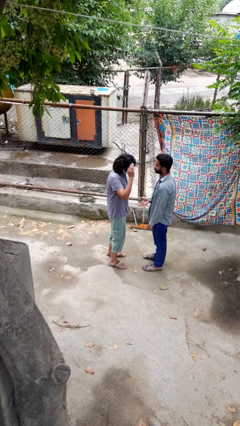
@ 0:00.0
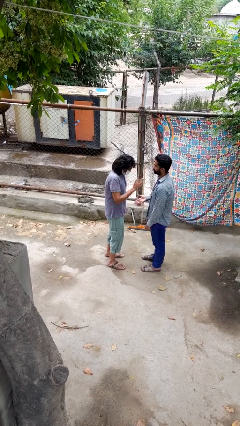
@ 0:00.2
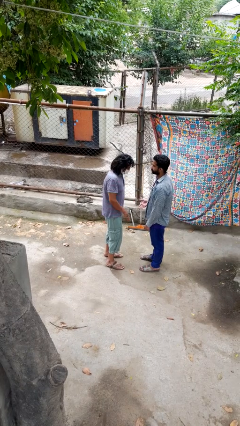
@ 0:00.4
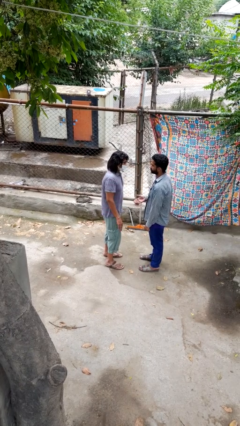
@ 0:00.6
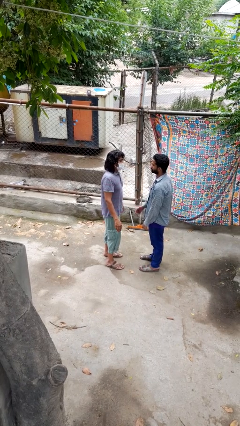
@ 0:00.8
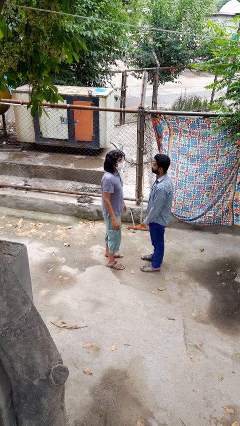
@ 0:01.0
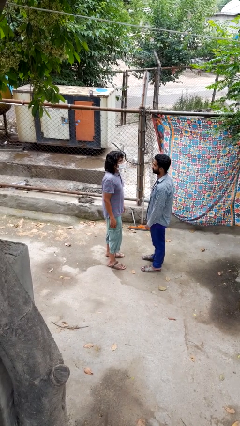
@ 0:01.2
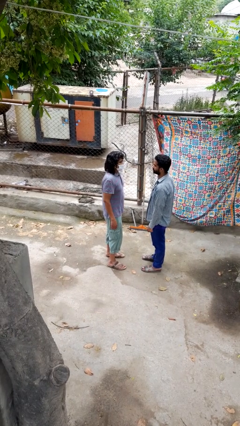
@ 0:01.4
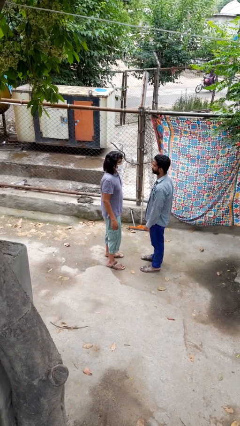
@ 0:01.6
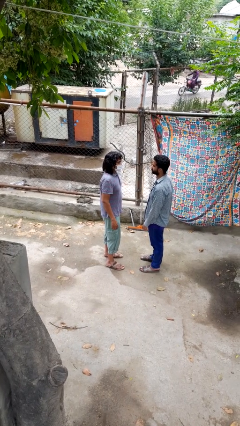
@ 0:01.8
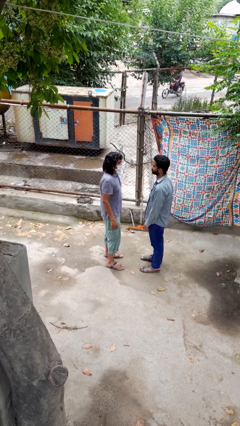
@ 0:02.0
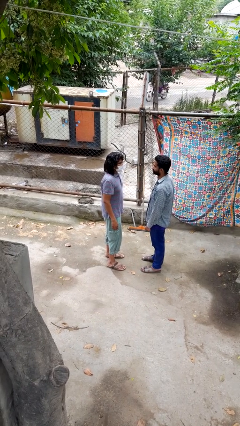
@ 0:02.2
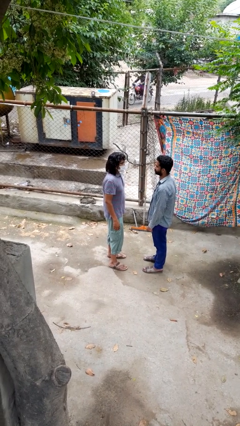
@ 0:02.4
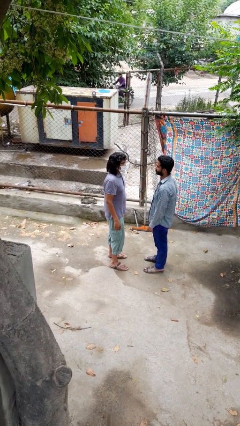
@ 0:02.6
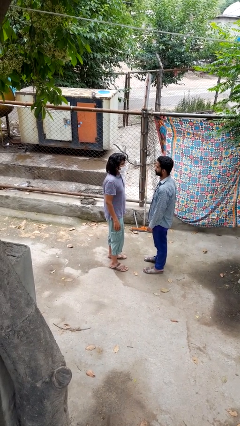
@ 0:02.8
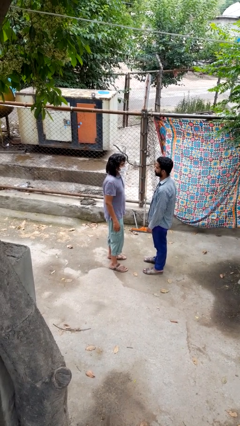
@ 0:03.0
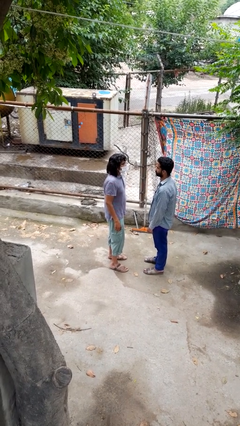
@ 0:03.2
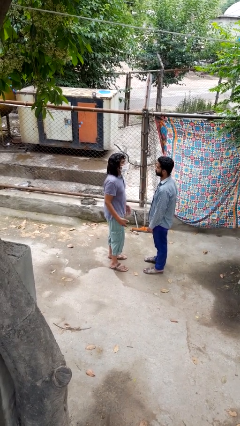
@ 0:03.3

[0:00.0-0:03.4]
person highfives hand

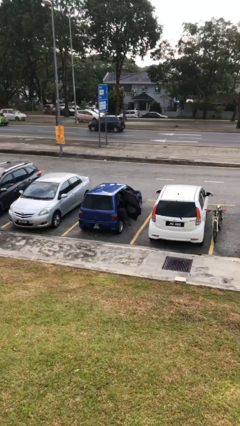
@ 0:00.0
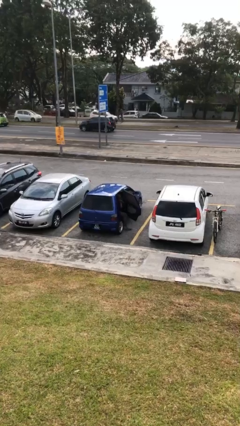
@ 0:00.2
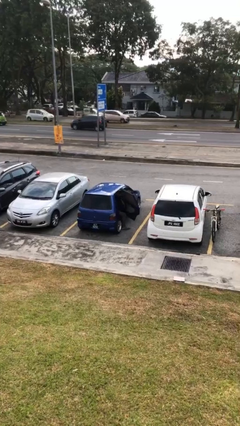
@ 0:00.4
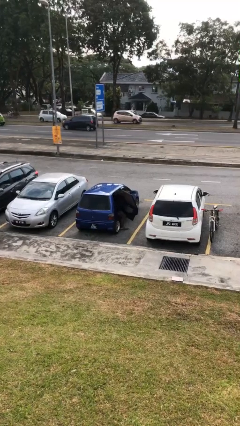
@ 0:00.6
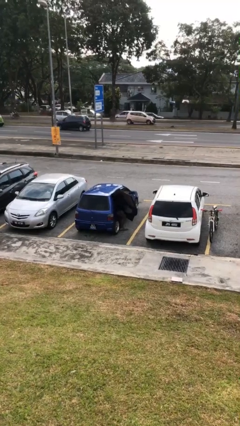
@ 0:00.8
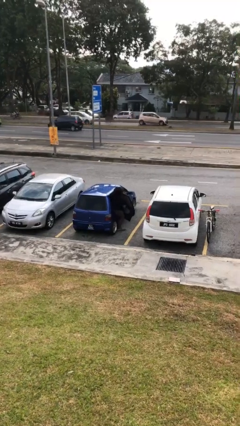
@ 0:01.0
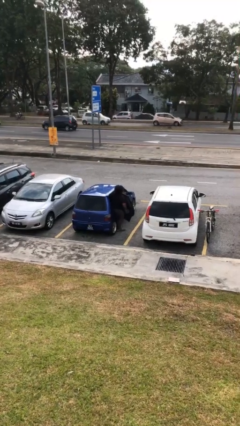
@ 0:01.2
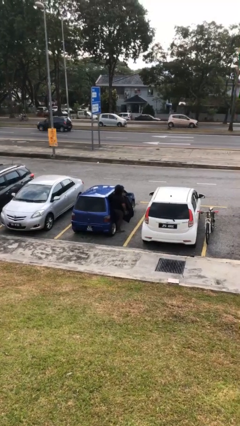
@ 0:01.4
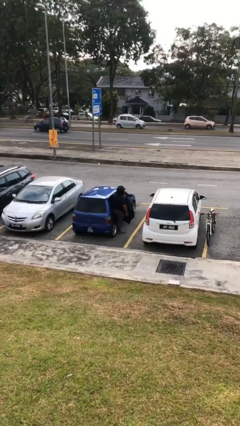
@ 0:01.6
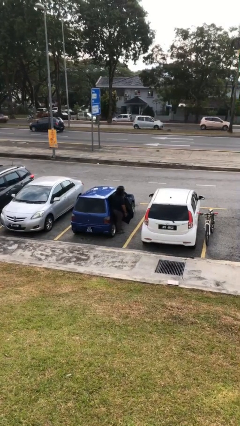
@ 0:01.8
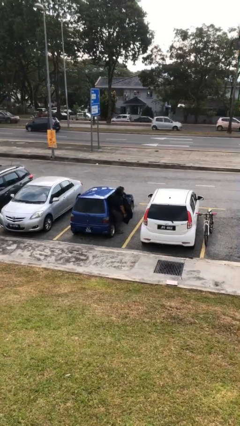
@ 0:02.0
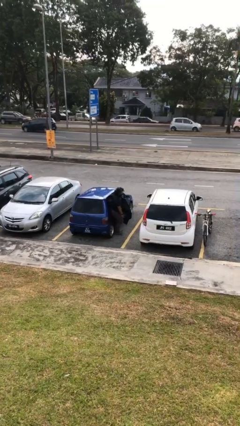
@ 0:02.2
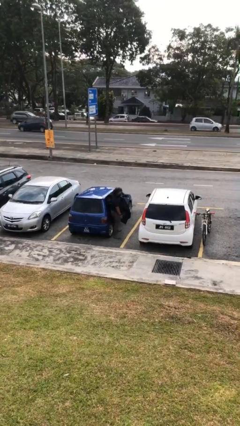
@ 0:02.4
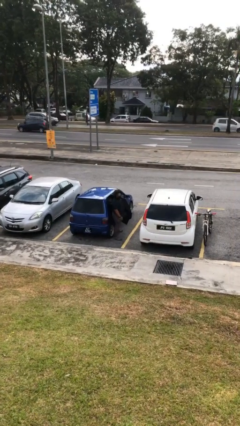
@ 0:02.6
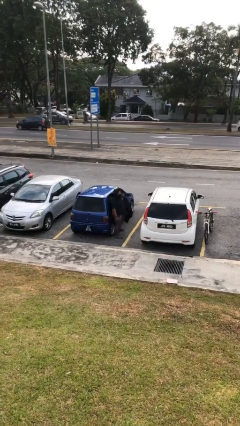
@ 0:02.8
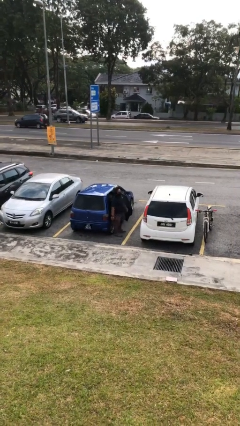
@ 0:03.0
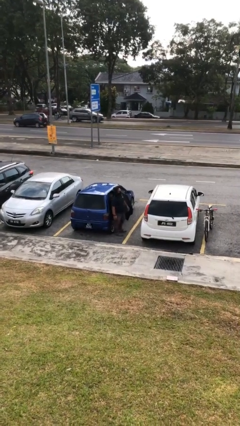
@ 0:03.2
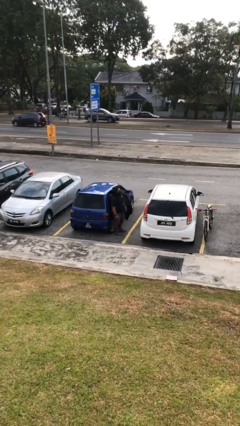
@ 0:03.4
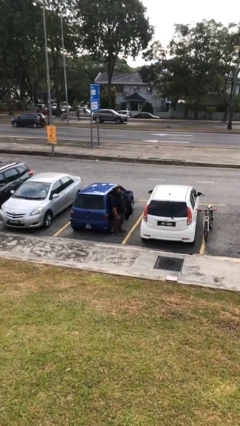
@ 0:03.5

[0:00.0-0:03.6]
person exits car

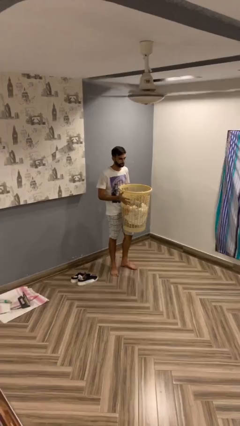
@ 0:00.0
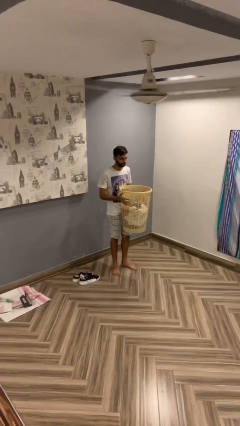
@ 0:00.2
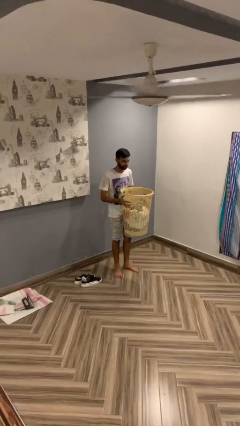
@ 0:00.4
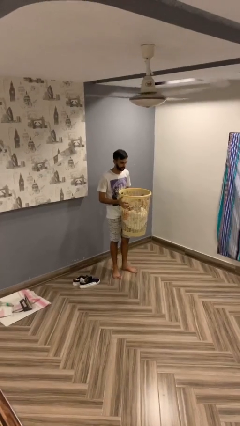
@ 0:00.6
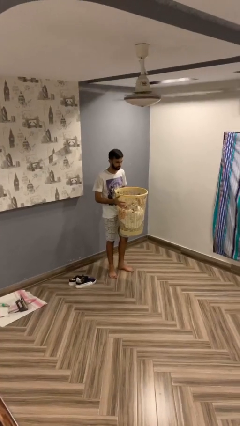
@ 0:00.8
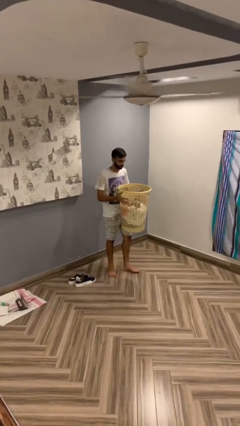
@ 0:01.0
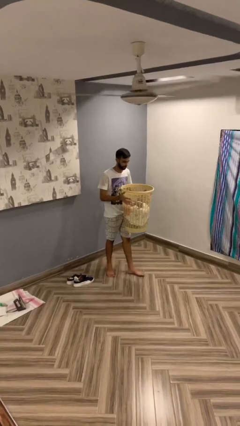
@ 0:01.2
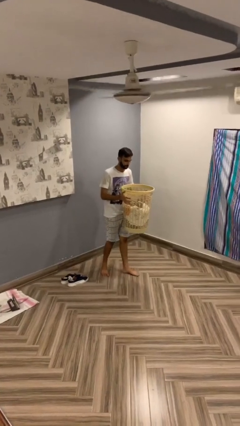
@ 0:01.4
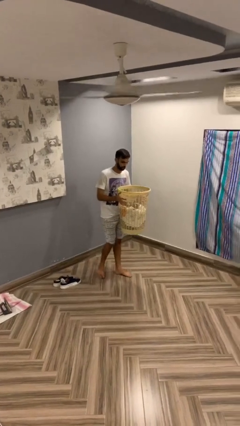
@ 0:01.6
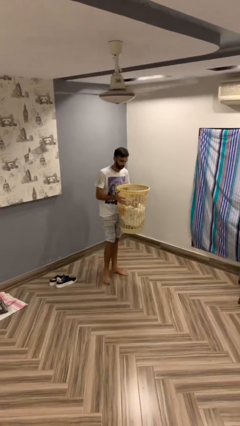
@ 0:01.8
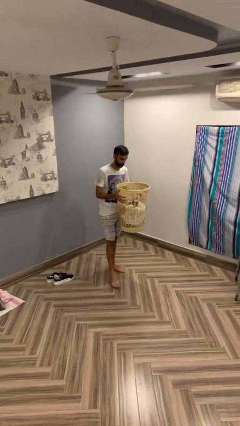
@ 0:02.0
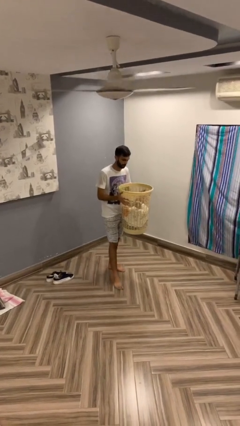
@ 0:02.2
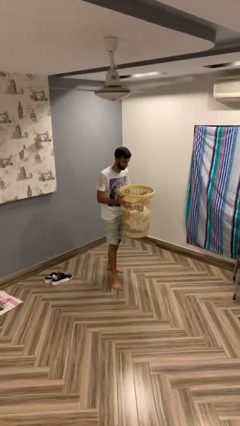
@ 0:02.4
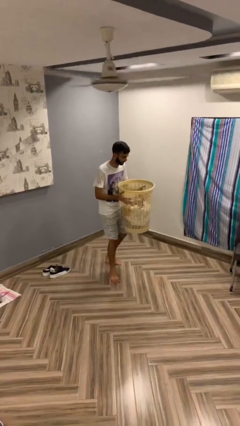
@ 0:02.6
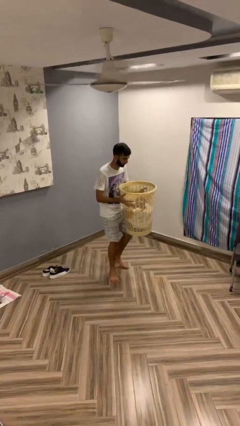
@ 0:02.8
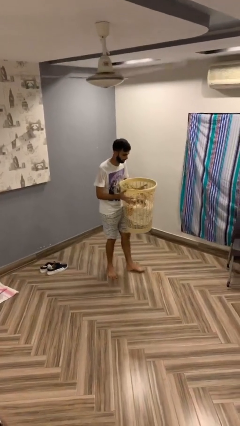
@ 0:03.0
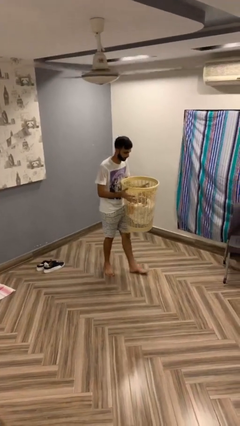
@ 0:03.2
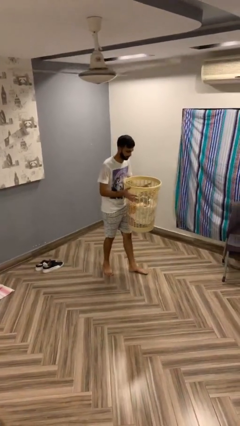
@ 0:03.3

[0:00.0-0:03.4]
person carries heavy object

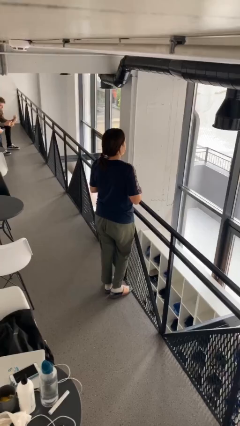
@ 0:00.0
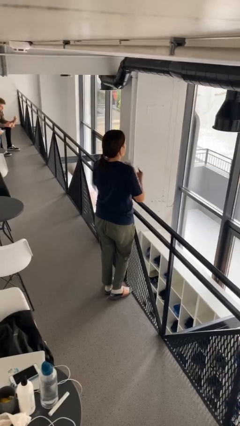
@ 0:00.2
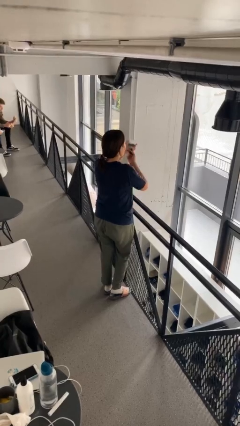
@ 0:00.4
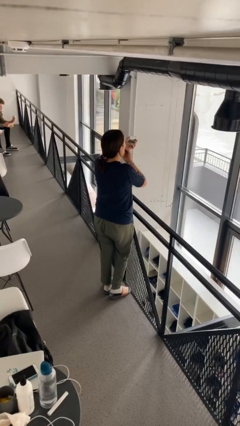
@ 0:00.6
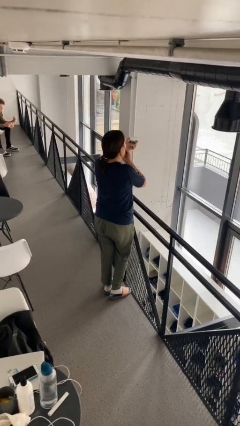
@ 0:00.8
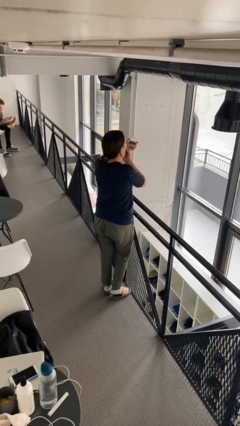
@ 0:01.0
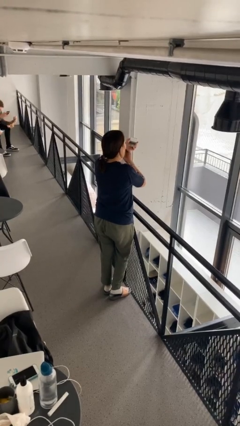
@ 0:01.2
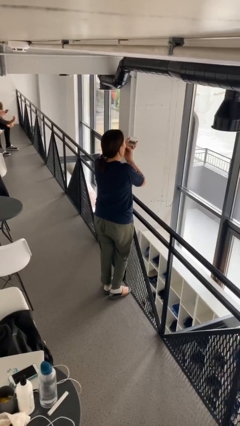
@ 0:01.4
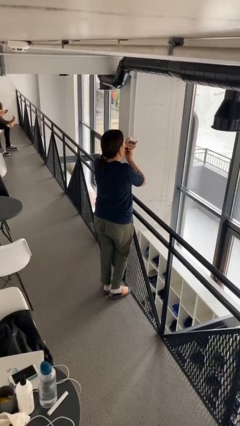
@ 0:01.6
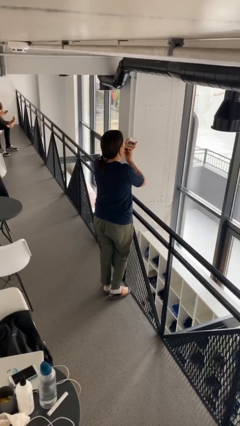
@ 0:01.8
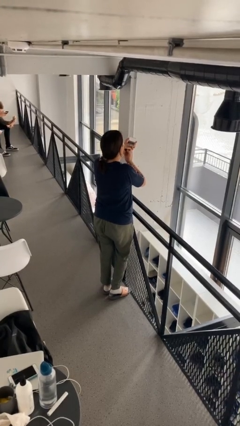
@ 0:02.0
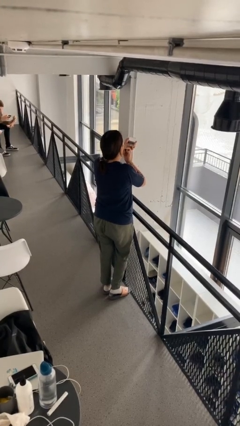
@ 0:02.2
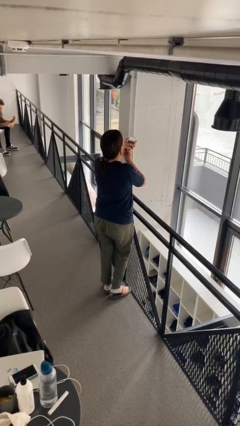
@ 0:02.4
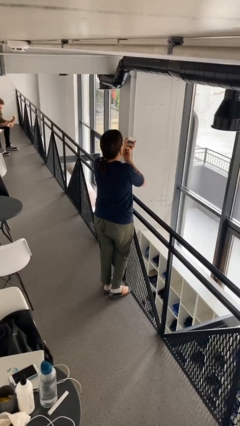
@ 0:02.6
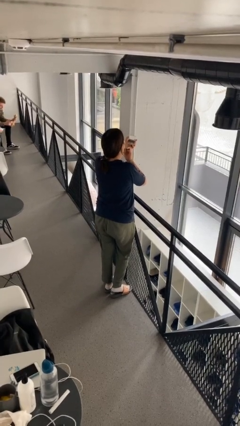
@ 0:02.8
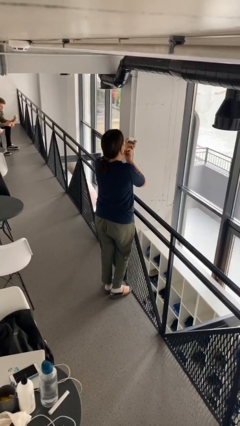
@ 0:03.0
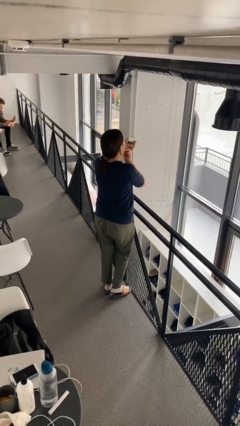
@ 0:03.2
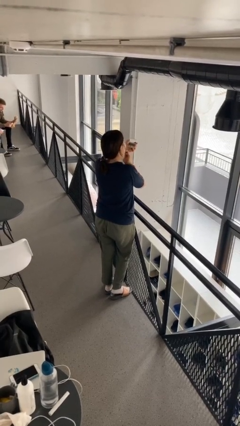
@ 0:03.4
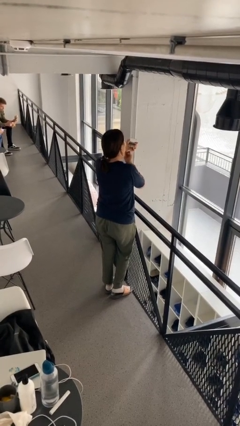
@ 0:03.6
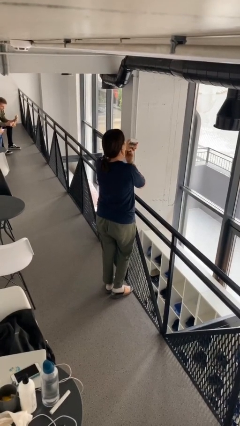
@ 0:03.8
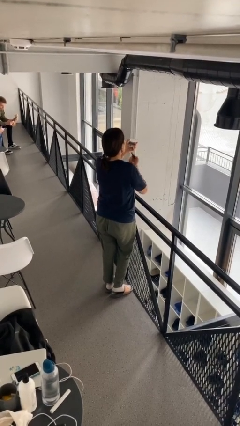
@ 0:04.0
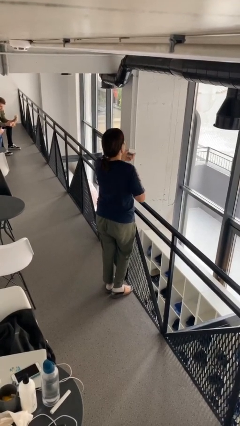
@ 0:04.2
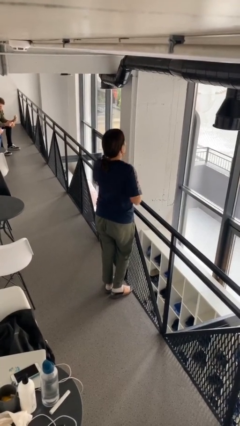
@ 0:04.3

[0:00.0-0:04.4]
person applies lip makeup

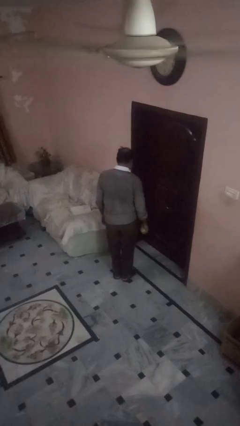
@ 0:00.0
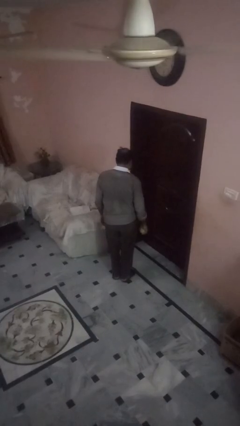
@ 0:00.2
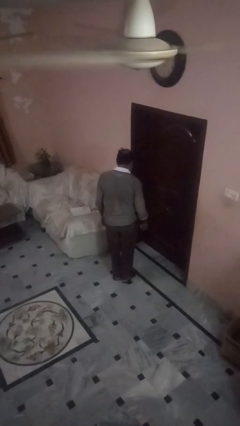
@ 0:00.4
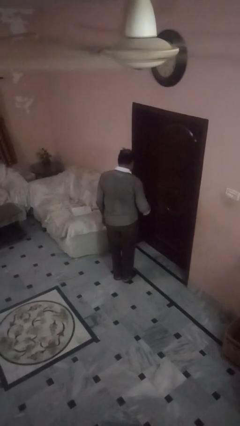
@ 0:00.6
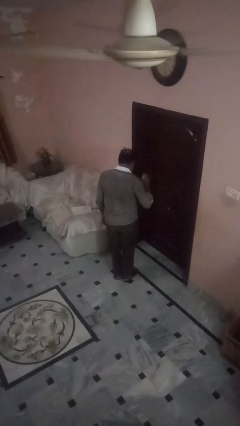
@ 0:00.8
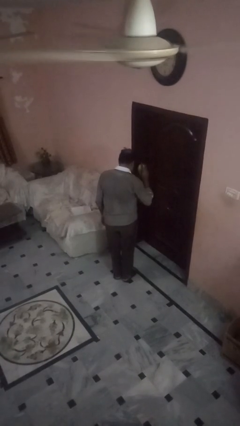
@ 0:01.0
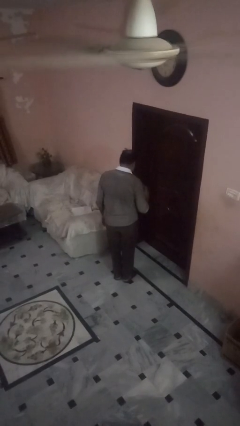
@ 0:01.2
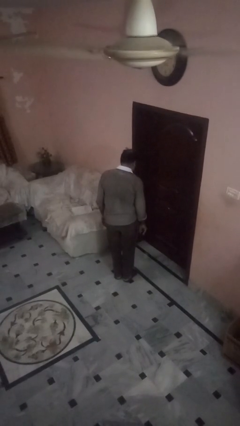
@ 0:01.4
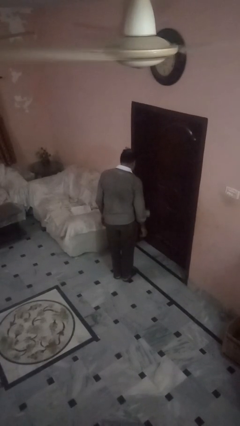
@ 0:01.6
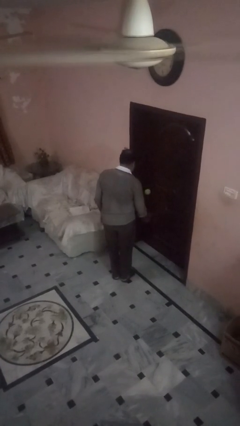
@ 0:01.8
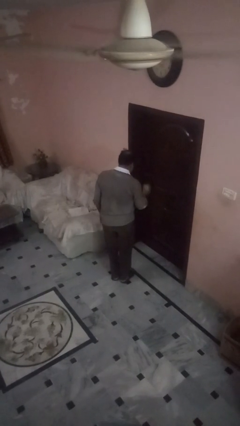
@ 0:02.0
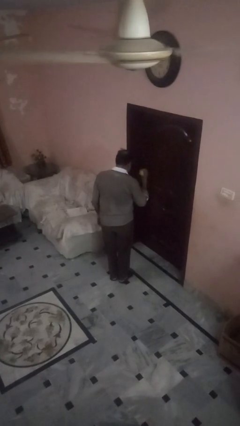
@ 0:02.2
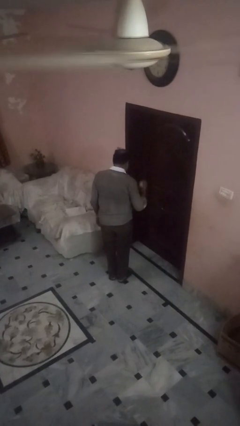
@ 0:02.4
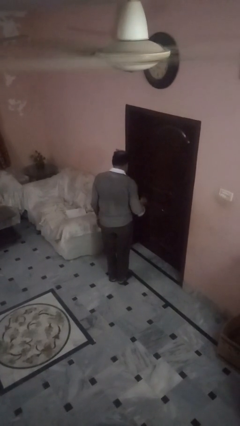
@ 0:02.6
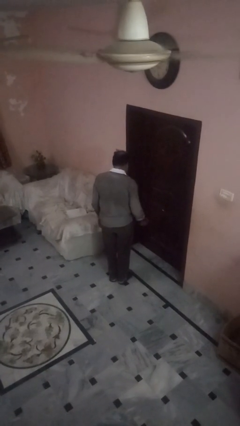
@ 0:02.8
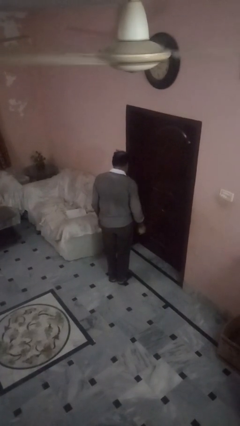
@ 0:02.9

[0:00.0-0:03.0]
person bounces ball on floor
